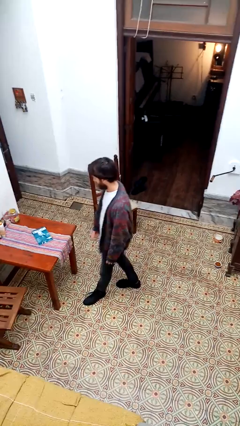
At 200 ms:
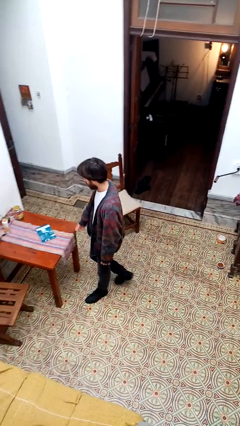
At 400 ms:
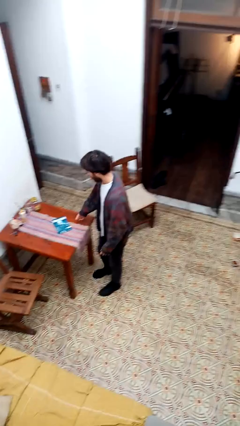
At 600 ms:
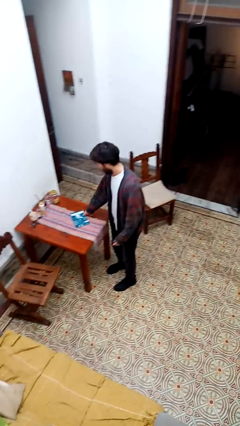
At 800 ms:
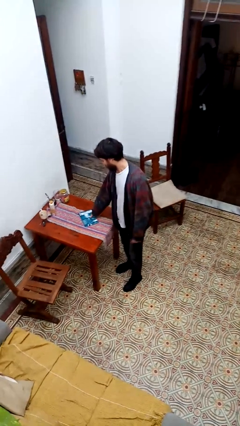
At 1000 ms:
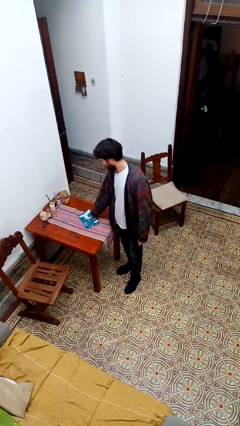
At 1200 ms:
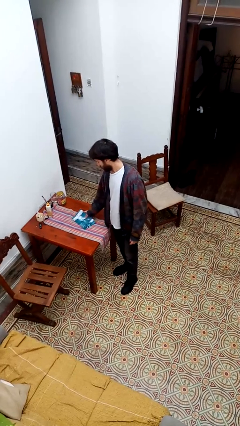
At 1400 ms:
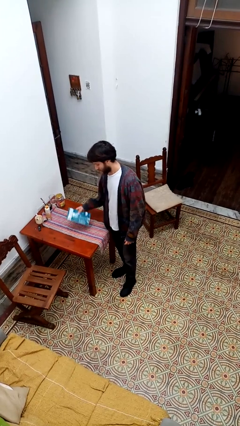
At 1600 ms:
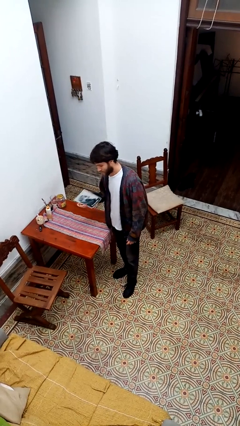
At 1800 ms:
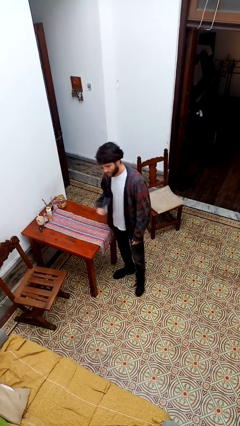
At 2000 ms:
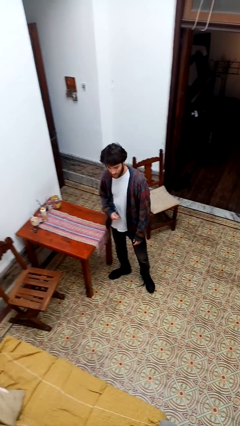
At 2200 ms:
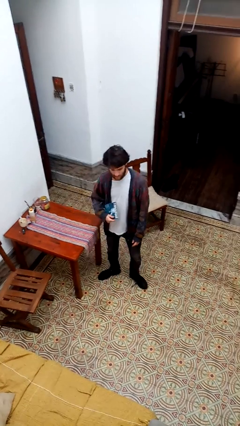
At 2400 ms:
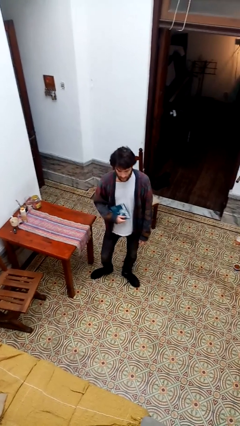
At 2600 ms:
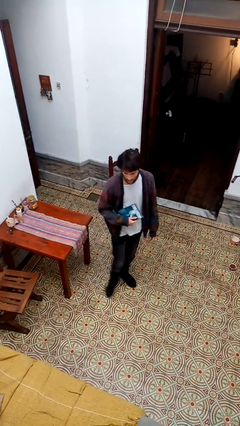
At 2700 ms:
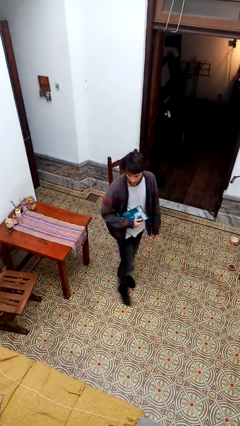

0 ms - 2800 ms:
person picks up object from table

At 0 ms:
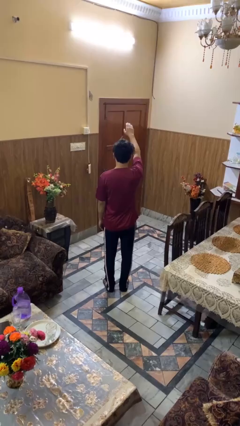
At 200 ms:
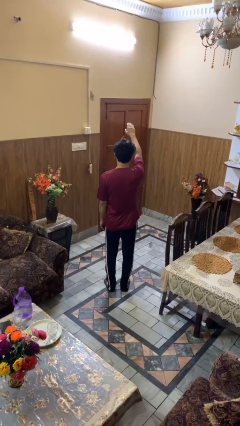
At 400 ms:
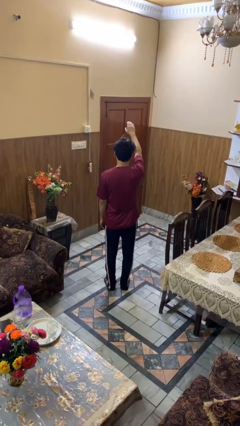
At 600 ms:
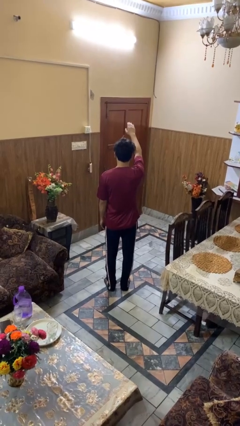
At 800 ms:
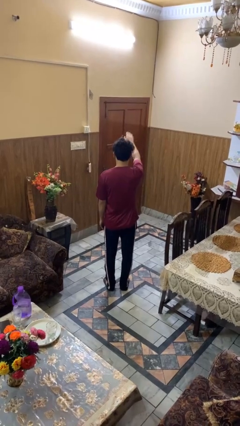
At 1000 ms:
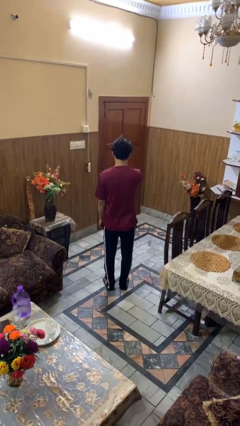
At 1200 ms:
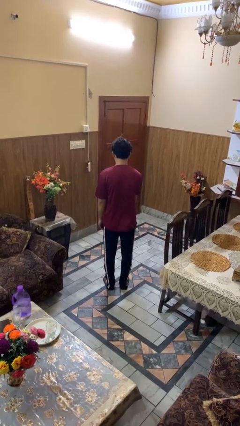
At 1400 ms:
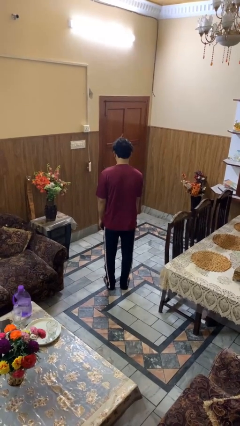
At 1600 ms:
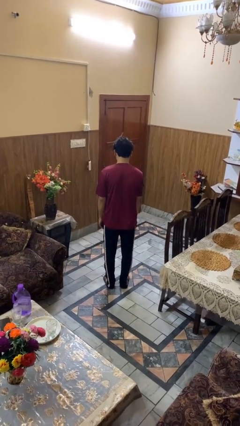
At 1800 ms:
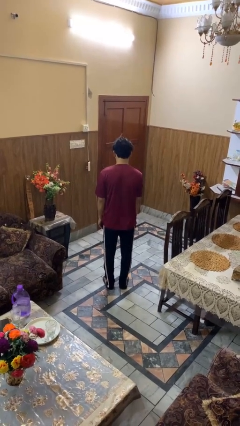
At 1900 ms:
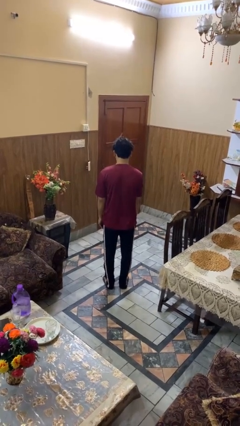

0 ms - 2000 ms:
person gestures swipe down

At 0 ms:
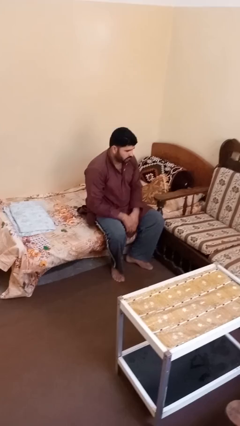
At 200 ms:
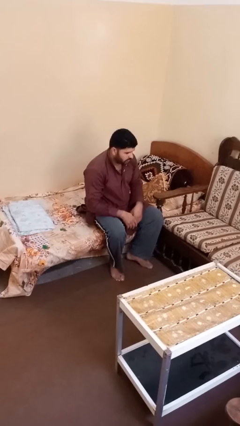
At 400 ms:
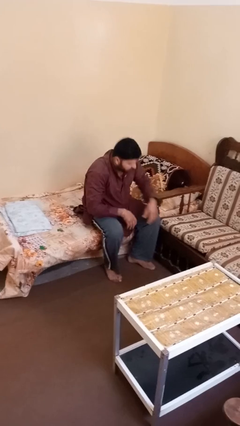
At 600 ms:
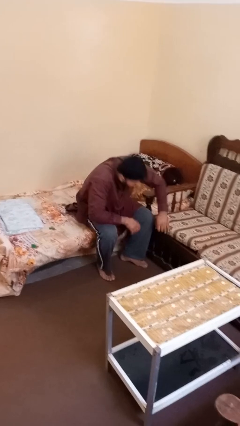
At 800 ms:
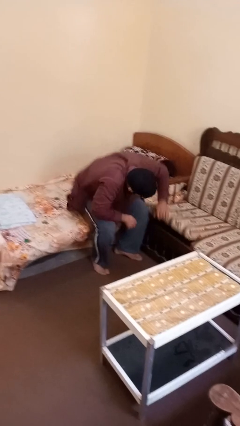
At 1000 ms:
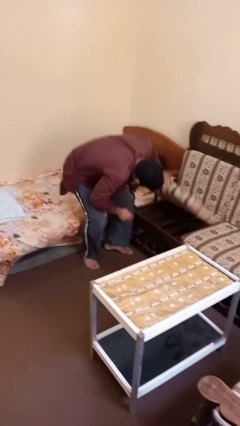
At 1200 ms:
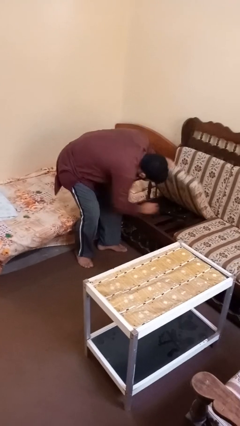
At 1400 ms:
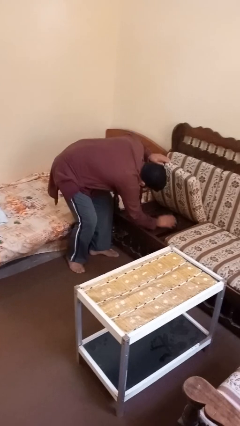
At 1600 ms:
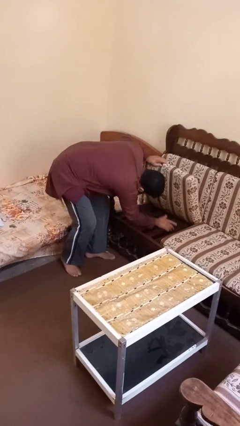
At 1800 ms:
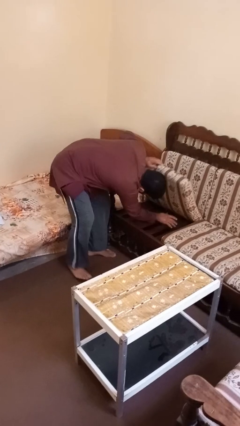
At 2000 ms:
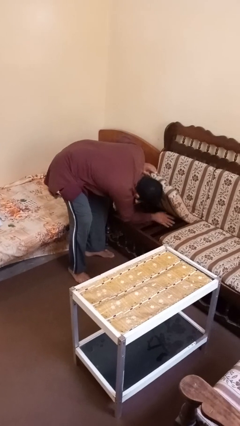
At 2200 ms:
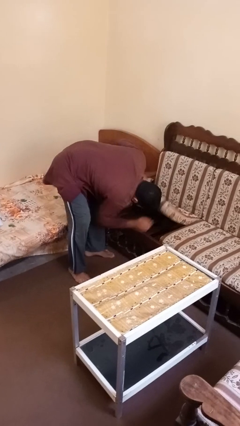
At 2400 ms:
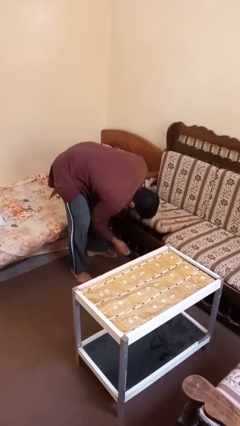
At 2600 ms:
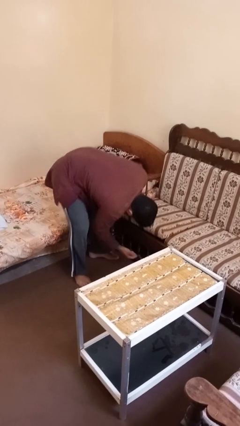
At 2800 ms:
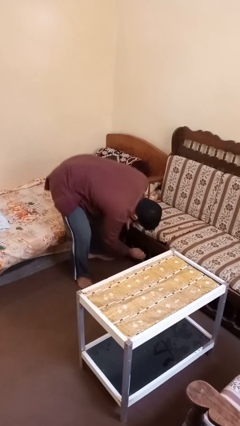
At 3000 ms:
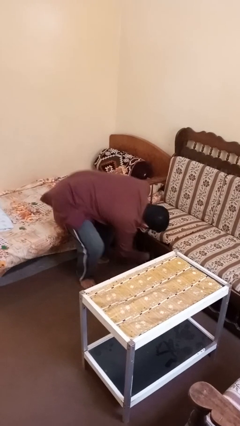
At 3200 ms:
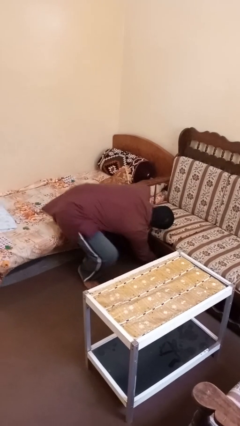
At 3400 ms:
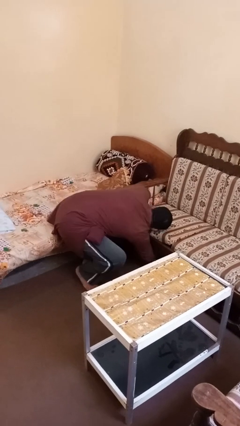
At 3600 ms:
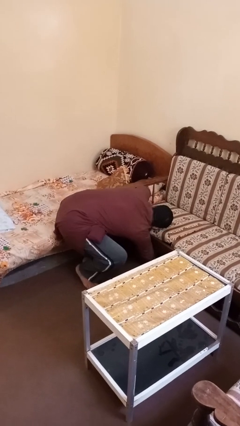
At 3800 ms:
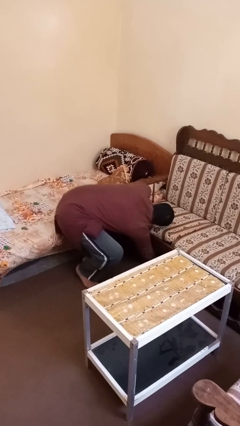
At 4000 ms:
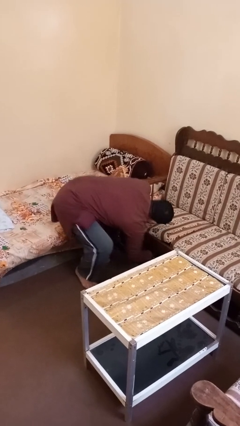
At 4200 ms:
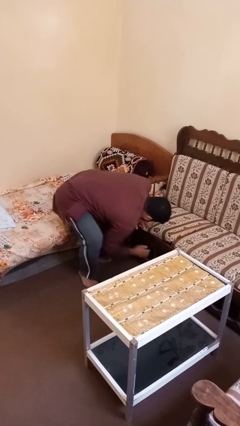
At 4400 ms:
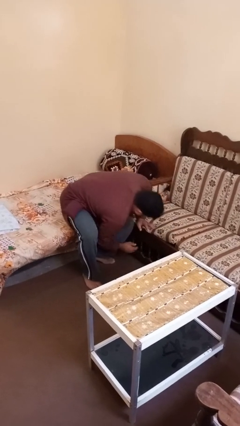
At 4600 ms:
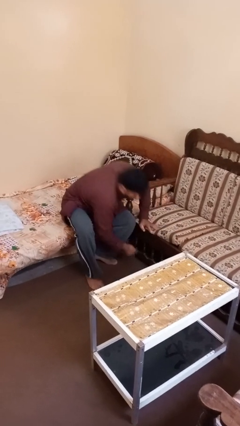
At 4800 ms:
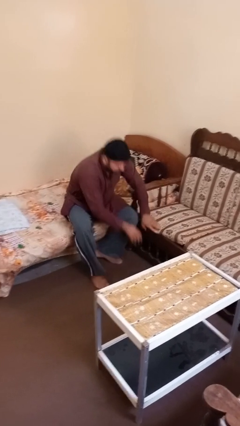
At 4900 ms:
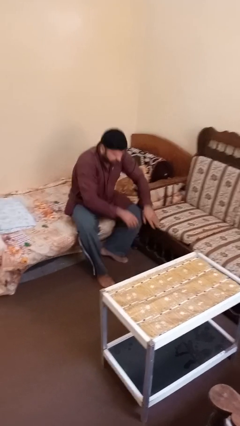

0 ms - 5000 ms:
person searches under couch

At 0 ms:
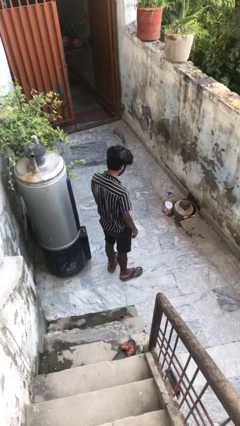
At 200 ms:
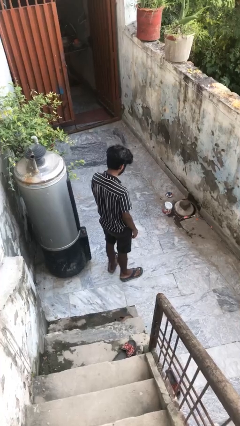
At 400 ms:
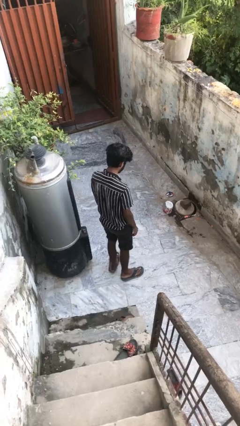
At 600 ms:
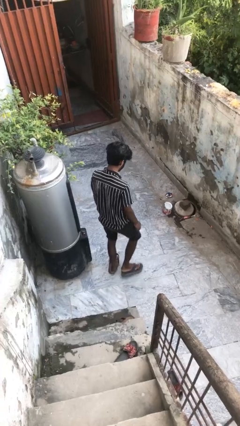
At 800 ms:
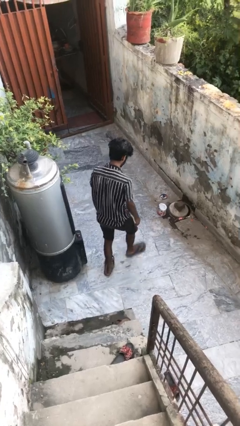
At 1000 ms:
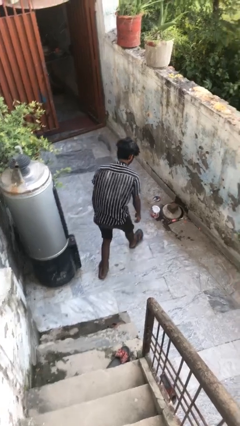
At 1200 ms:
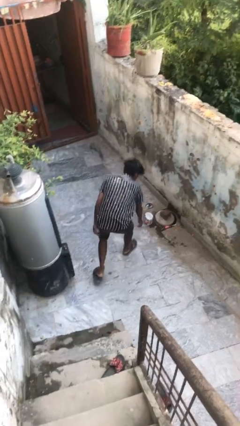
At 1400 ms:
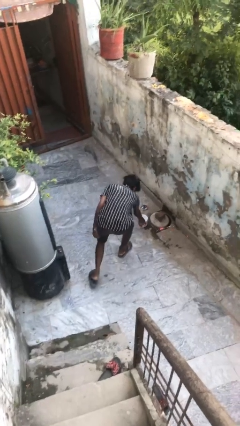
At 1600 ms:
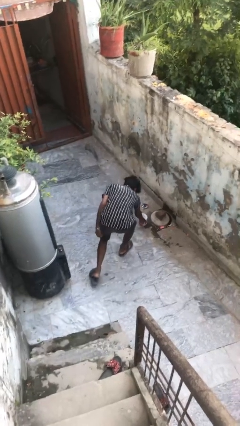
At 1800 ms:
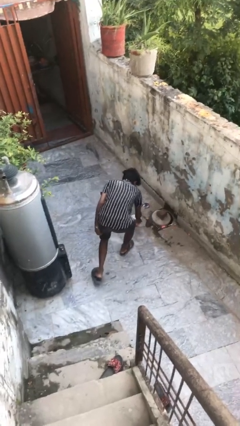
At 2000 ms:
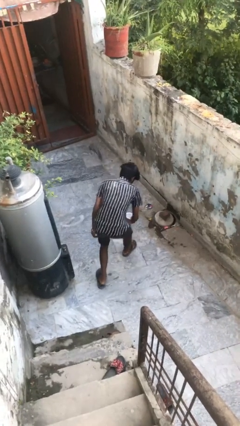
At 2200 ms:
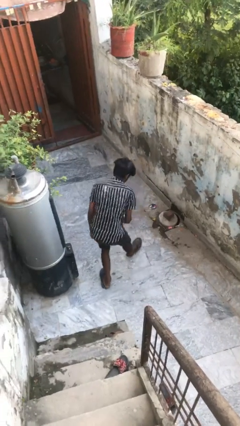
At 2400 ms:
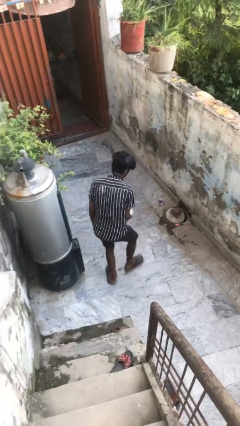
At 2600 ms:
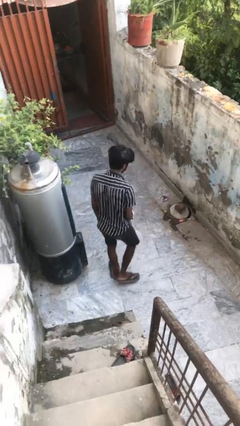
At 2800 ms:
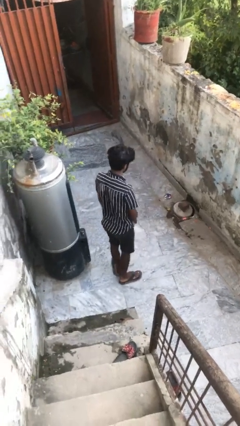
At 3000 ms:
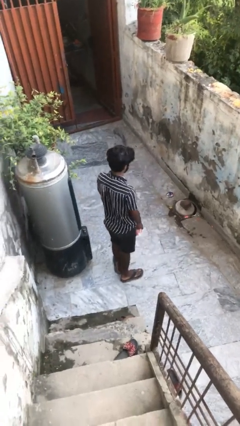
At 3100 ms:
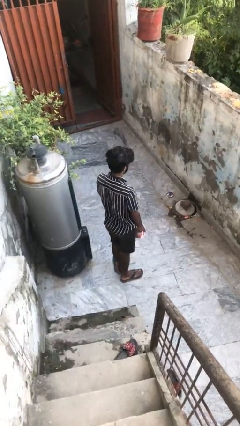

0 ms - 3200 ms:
person picks up object from floor

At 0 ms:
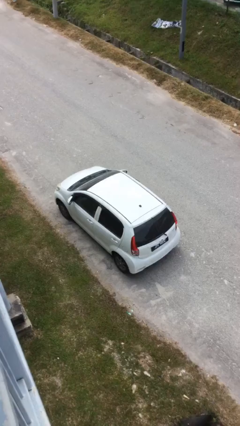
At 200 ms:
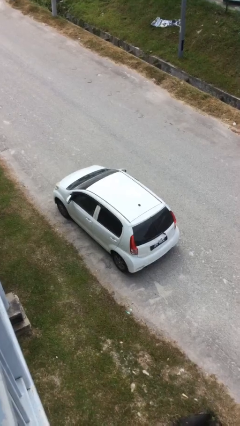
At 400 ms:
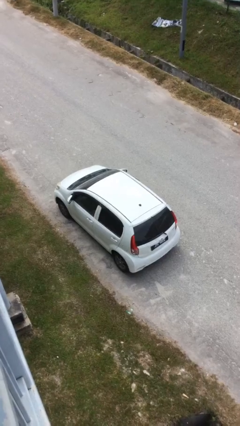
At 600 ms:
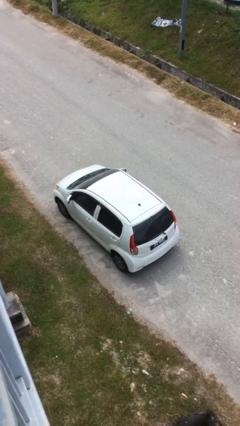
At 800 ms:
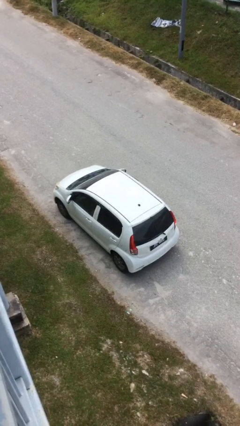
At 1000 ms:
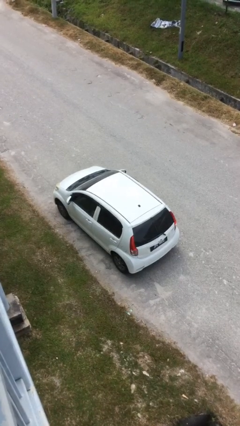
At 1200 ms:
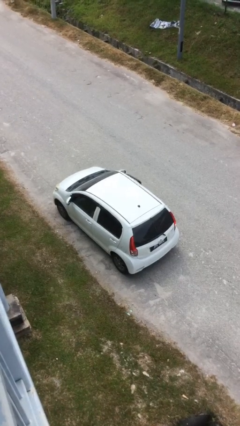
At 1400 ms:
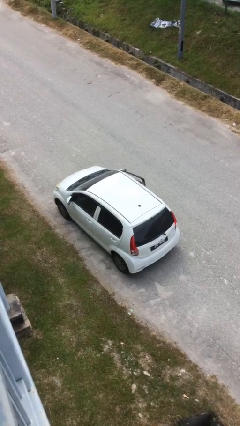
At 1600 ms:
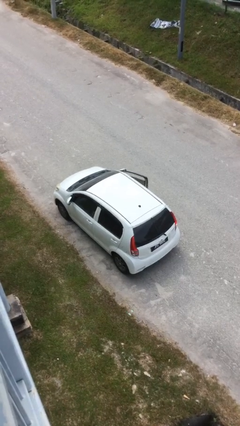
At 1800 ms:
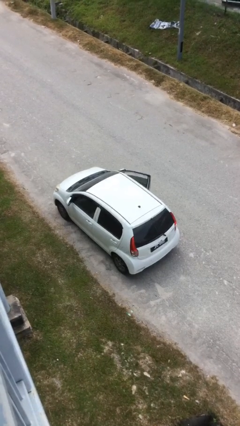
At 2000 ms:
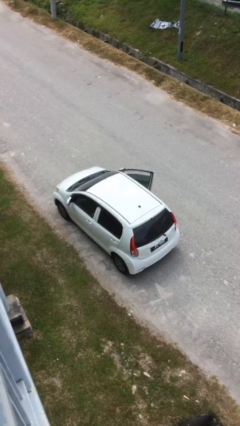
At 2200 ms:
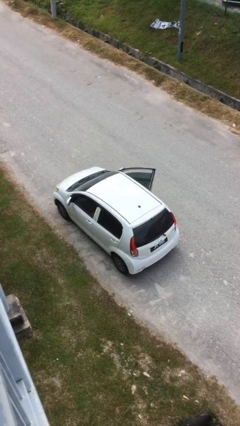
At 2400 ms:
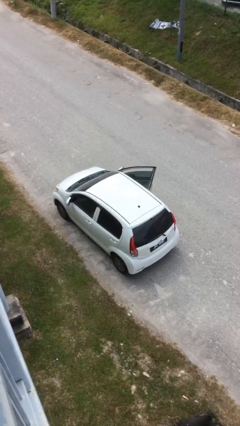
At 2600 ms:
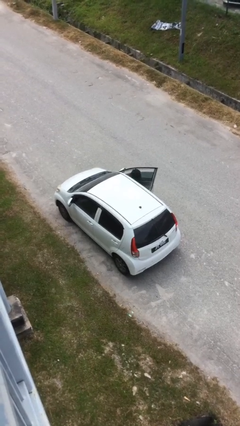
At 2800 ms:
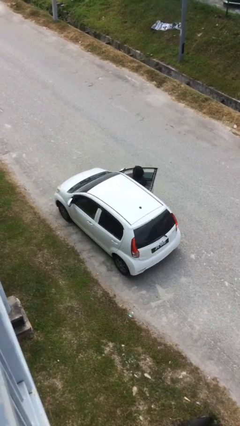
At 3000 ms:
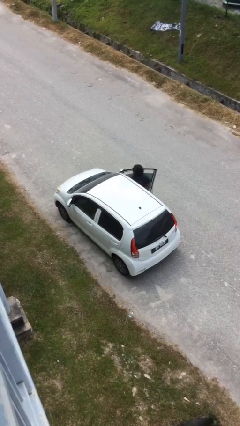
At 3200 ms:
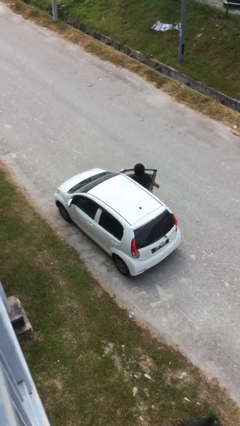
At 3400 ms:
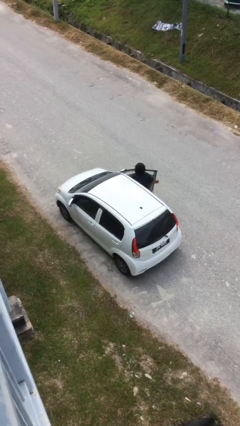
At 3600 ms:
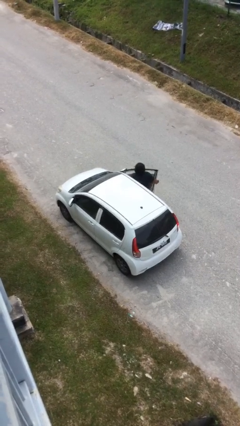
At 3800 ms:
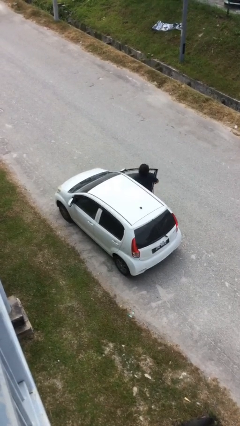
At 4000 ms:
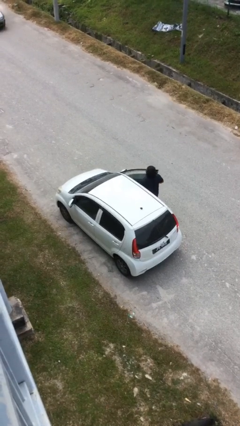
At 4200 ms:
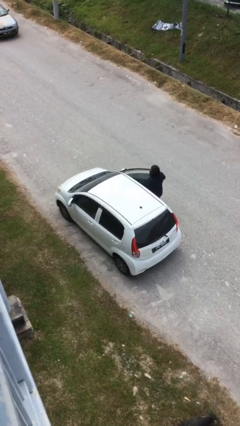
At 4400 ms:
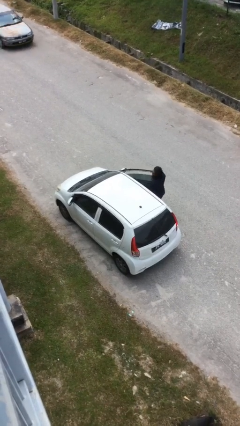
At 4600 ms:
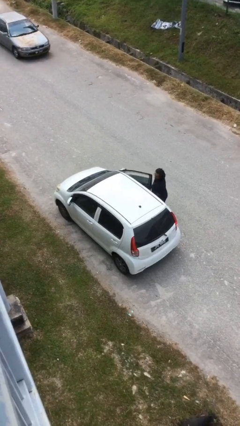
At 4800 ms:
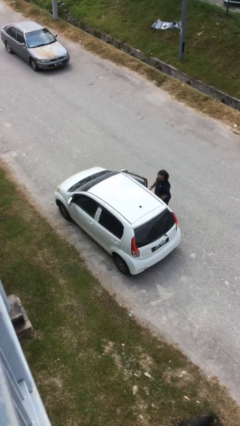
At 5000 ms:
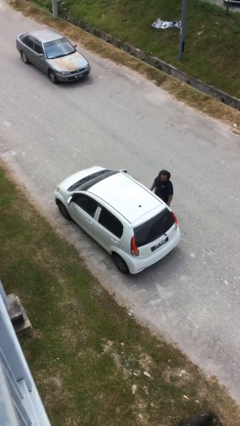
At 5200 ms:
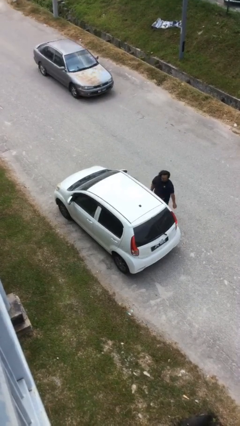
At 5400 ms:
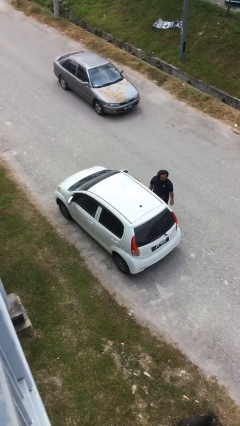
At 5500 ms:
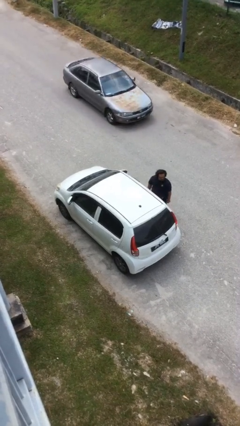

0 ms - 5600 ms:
car drops off person